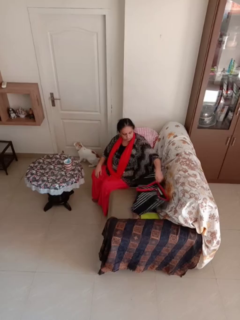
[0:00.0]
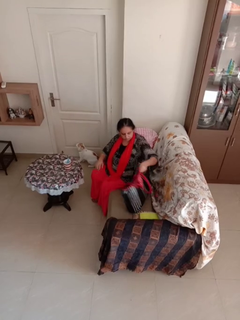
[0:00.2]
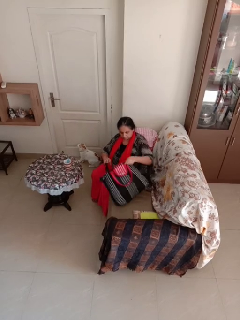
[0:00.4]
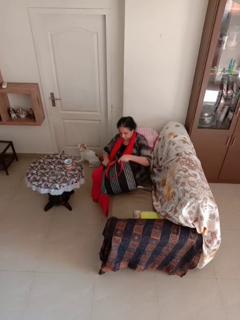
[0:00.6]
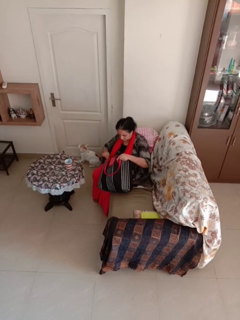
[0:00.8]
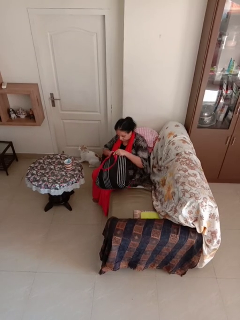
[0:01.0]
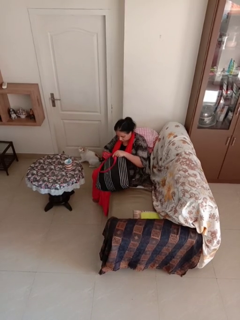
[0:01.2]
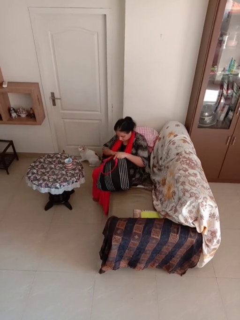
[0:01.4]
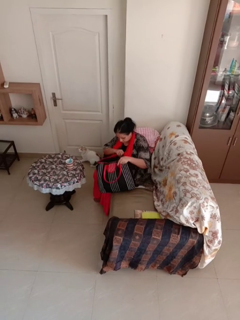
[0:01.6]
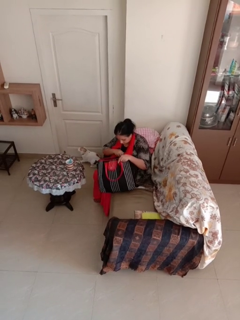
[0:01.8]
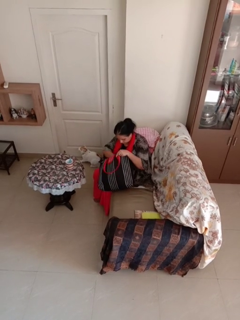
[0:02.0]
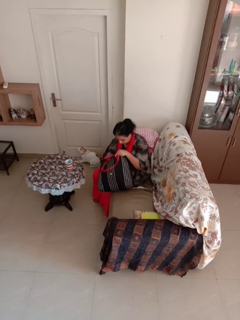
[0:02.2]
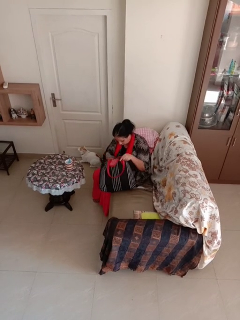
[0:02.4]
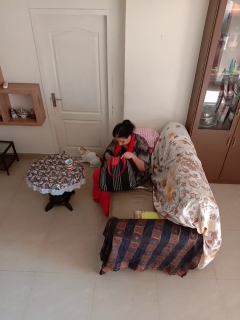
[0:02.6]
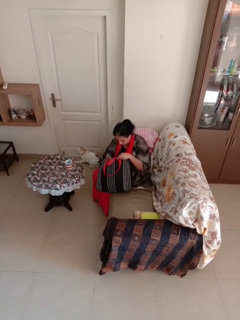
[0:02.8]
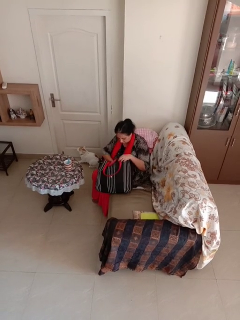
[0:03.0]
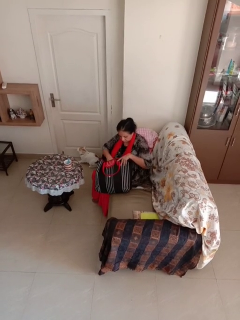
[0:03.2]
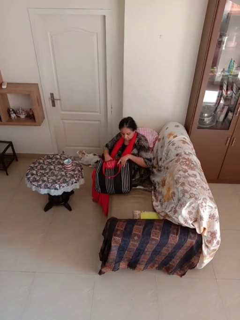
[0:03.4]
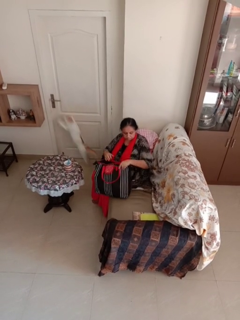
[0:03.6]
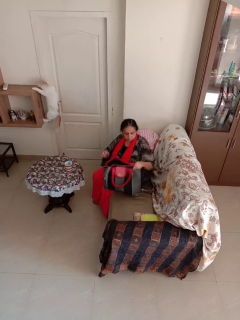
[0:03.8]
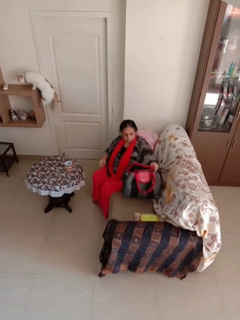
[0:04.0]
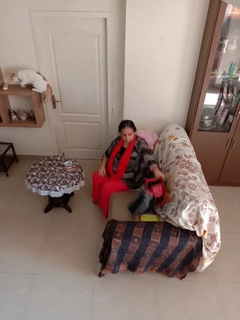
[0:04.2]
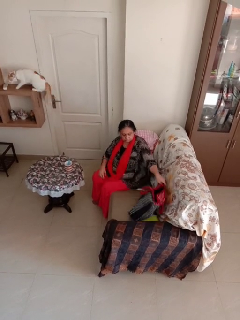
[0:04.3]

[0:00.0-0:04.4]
person searches in bag

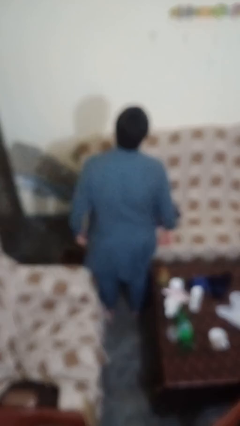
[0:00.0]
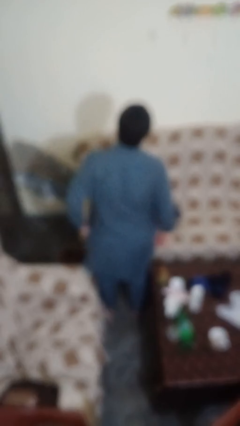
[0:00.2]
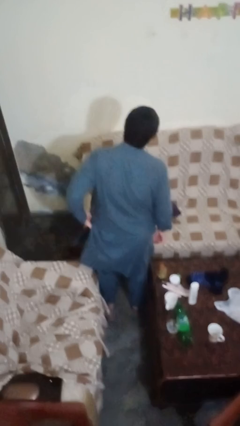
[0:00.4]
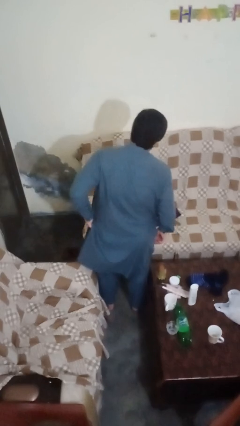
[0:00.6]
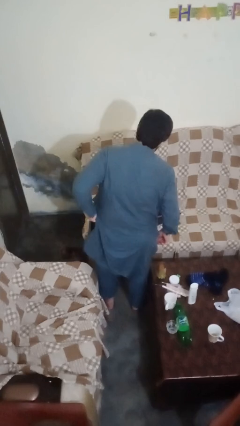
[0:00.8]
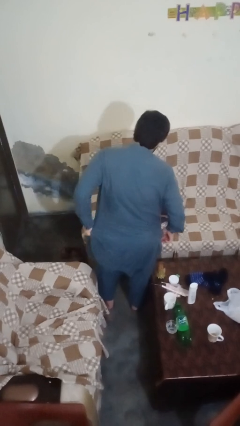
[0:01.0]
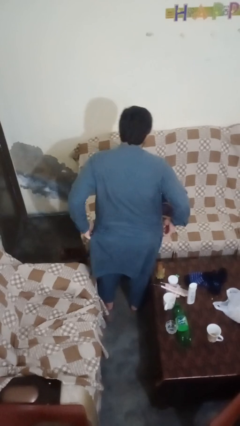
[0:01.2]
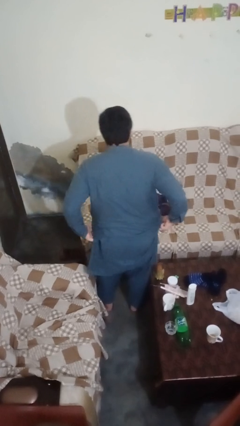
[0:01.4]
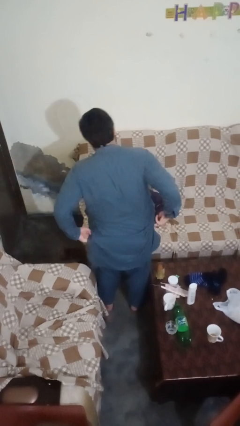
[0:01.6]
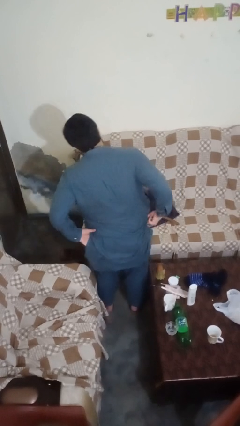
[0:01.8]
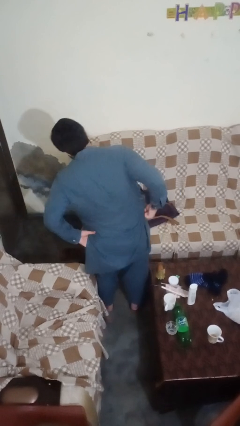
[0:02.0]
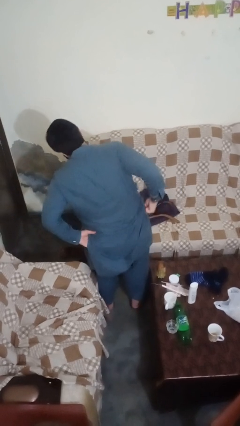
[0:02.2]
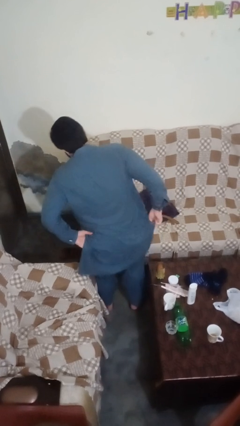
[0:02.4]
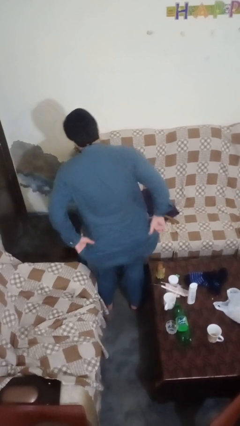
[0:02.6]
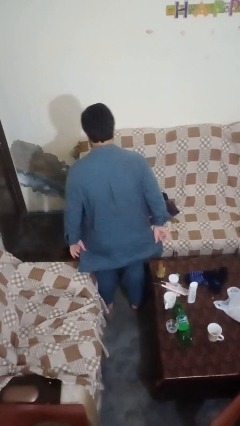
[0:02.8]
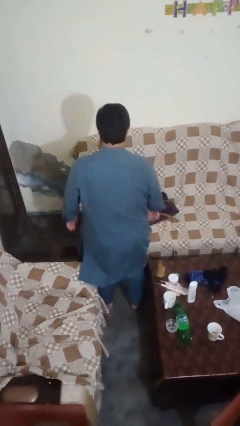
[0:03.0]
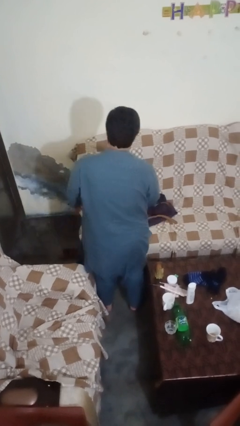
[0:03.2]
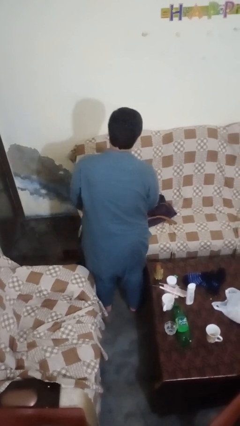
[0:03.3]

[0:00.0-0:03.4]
person hikes up pants

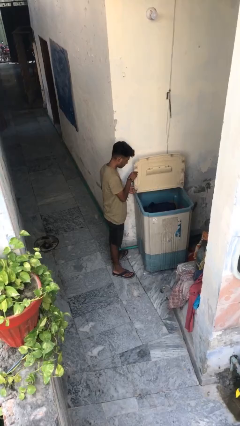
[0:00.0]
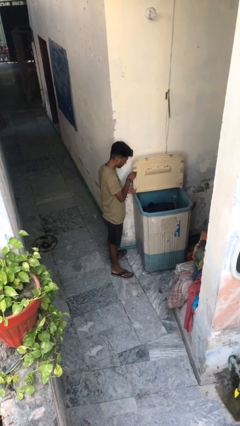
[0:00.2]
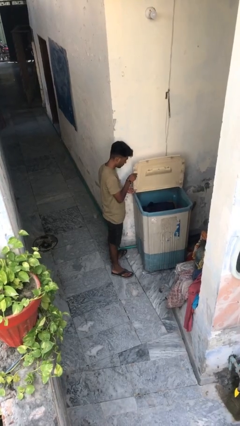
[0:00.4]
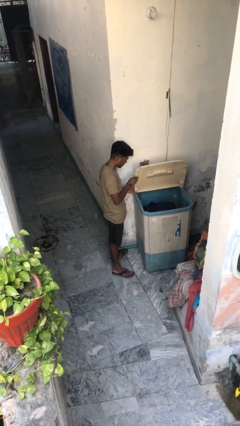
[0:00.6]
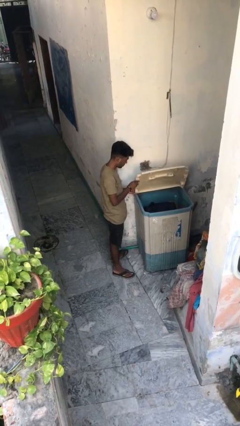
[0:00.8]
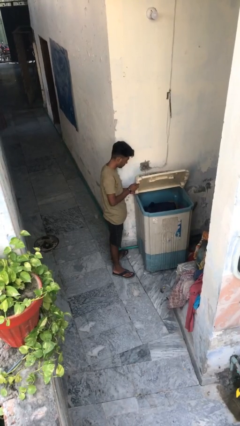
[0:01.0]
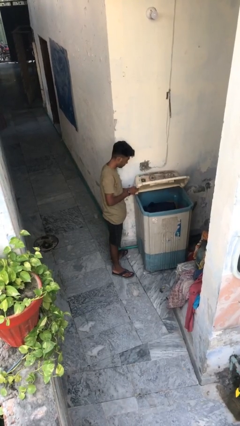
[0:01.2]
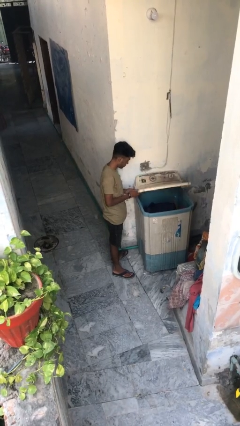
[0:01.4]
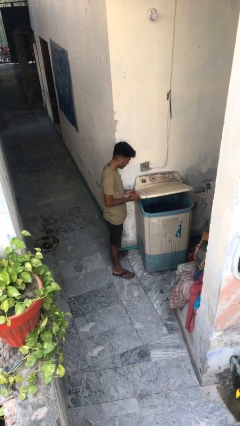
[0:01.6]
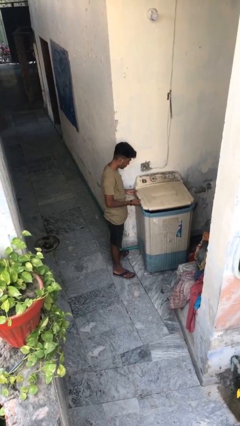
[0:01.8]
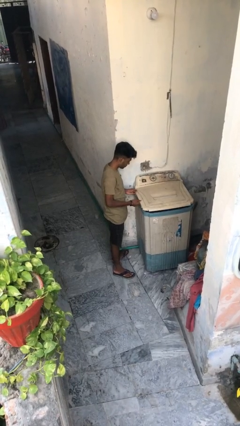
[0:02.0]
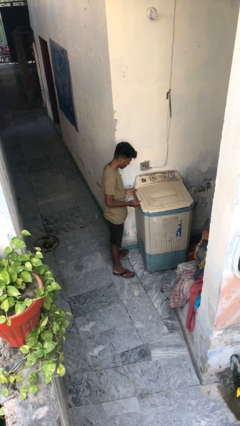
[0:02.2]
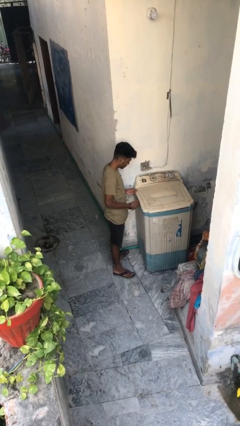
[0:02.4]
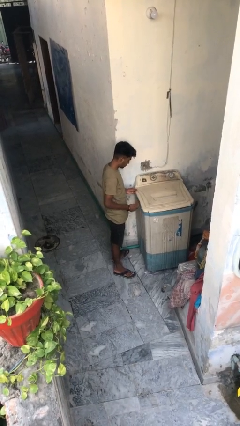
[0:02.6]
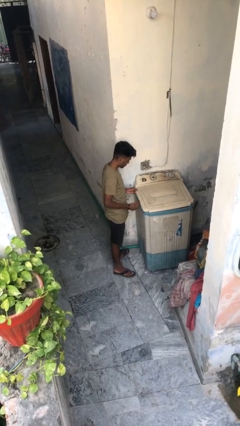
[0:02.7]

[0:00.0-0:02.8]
person closes clothes washer

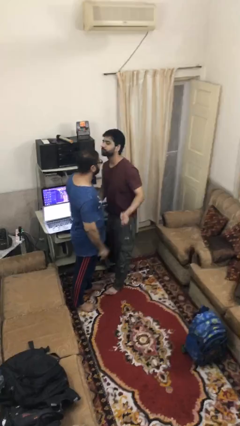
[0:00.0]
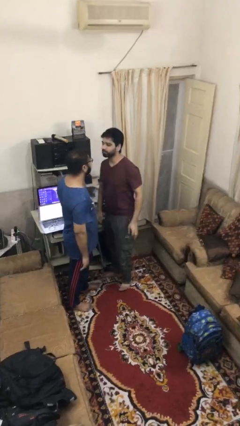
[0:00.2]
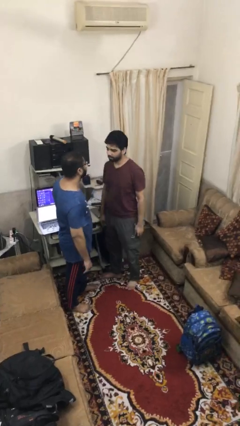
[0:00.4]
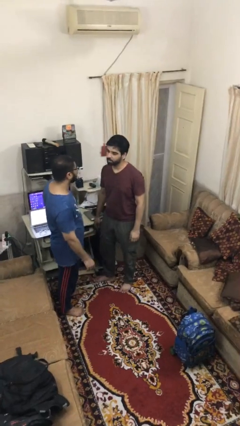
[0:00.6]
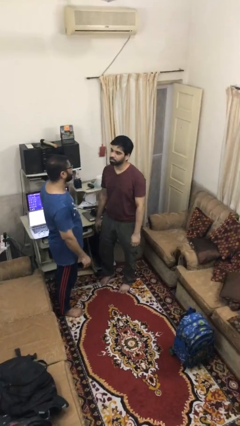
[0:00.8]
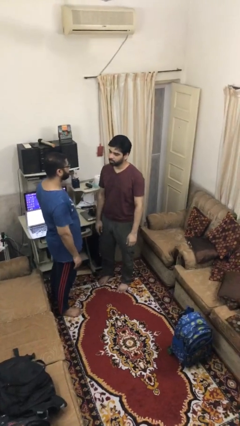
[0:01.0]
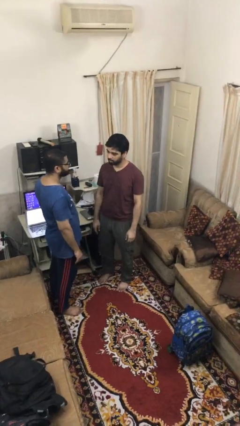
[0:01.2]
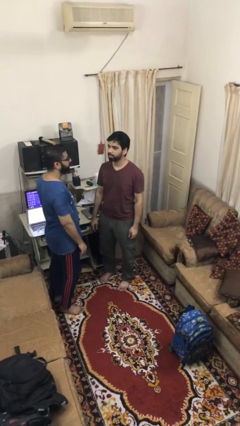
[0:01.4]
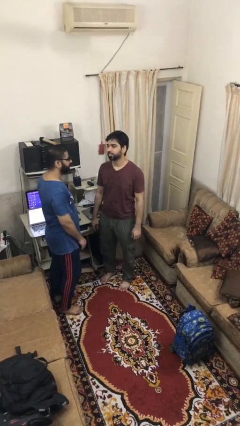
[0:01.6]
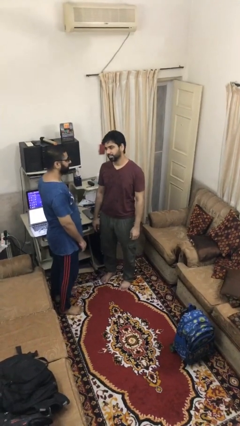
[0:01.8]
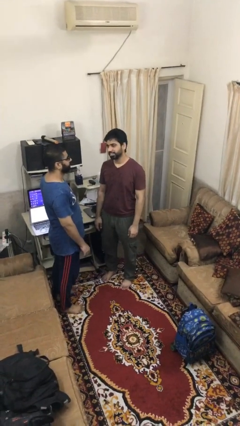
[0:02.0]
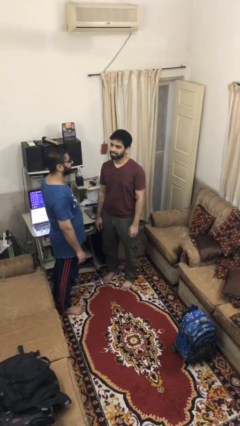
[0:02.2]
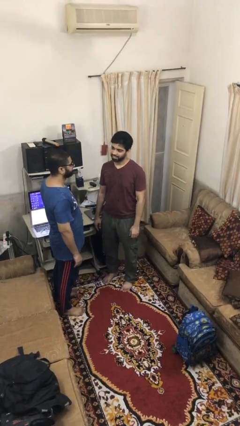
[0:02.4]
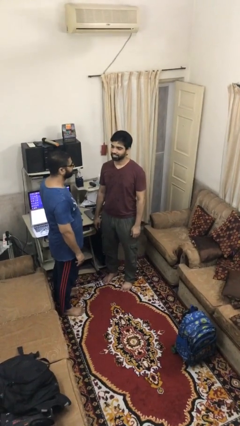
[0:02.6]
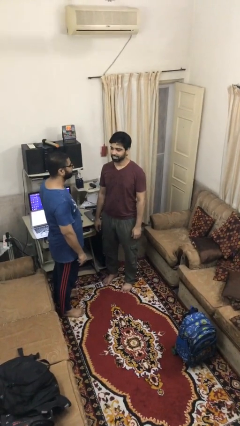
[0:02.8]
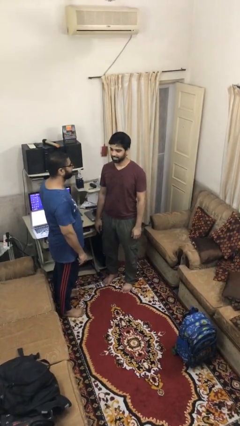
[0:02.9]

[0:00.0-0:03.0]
person talks to person

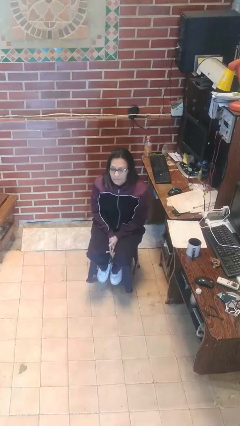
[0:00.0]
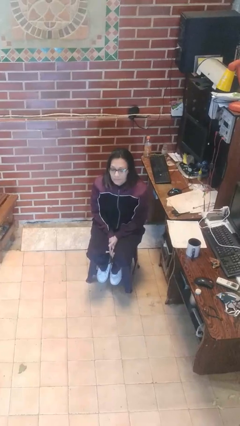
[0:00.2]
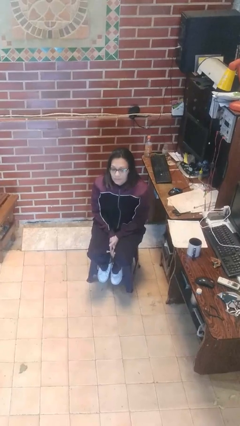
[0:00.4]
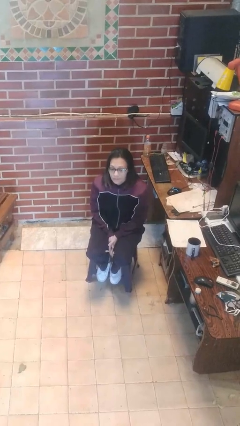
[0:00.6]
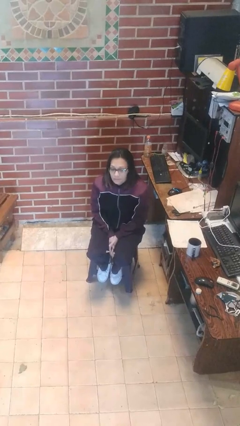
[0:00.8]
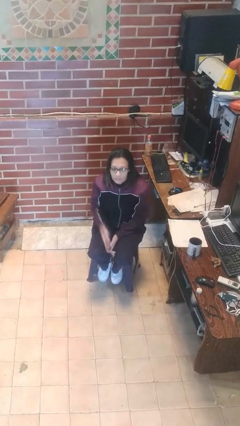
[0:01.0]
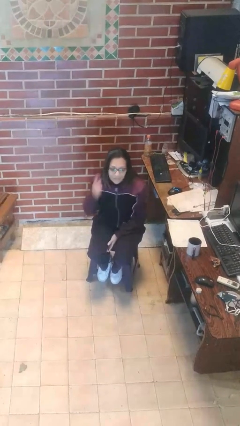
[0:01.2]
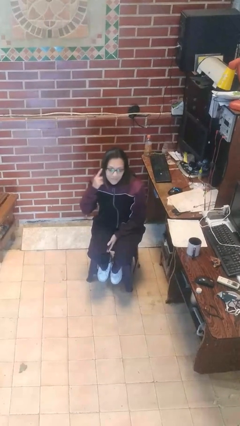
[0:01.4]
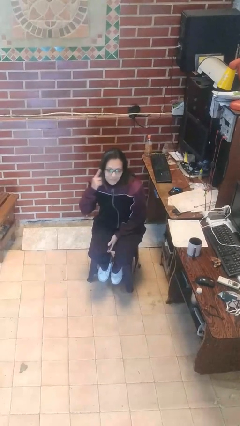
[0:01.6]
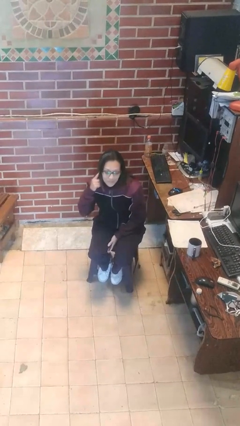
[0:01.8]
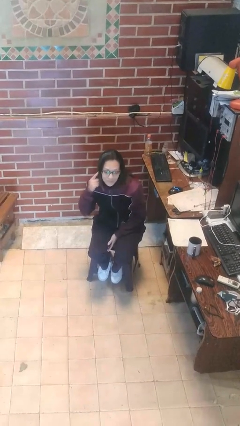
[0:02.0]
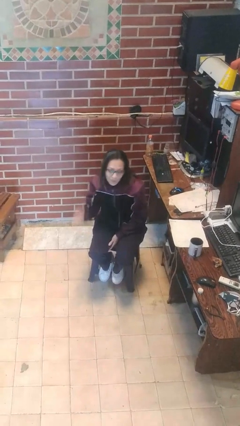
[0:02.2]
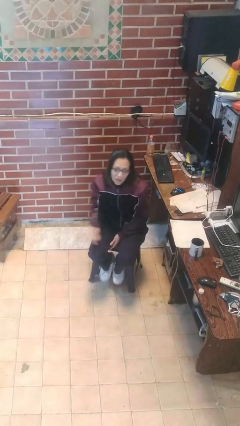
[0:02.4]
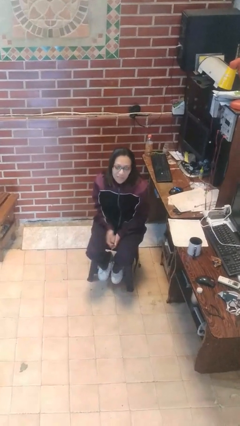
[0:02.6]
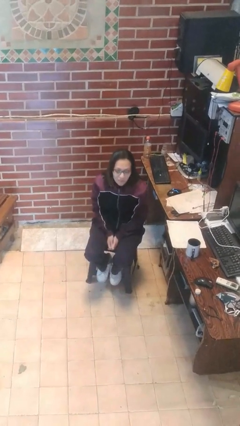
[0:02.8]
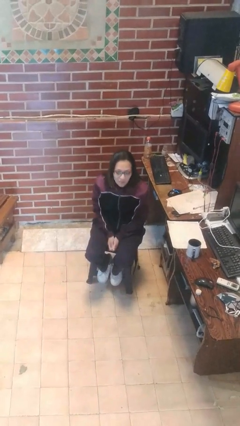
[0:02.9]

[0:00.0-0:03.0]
person gestures listen closely

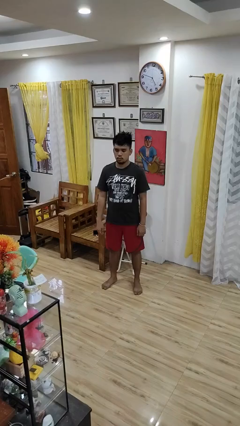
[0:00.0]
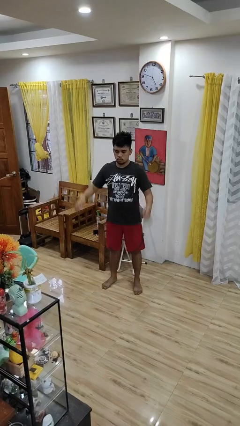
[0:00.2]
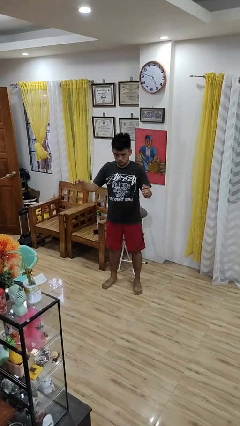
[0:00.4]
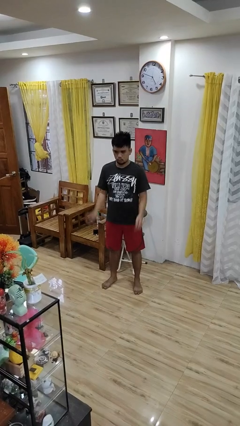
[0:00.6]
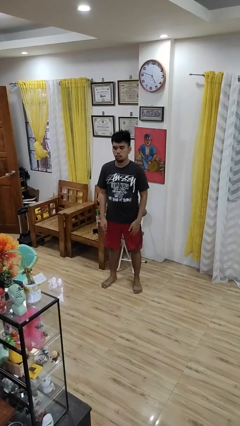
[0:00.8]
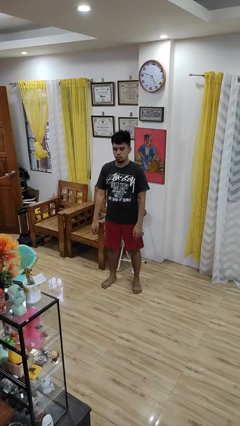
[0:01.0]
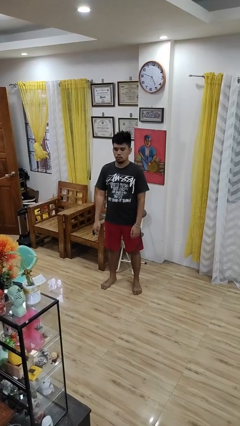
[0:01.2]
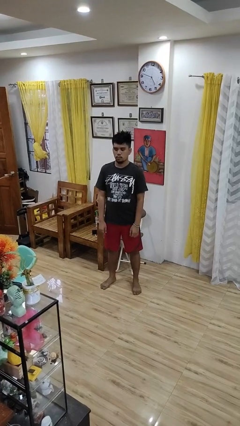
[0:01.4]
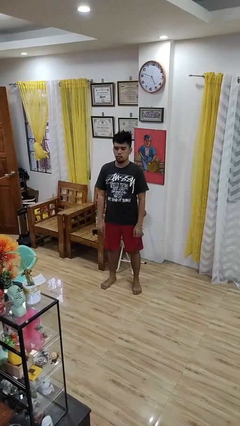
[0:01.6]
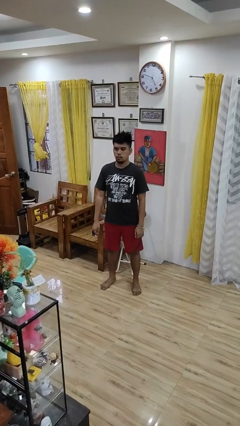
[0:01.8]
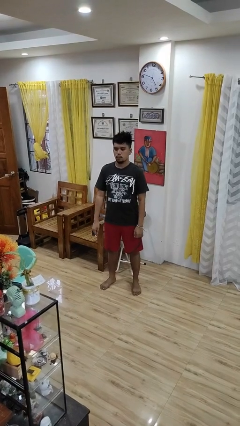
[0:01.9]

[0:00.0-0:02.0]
person slaps hands on thighs
